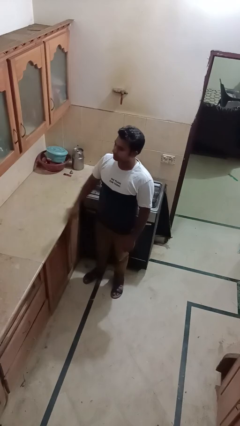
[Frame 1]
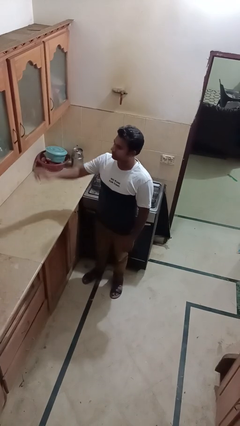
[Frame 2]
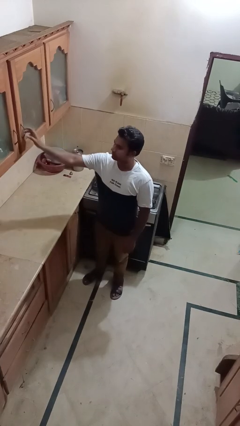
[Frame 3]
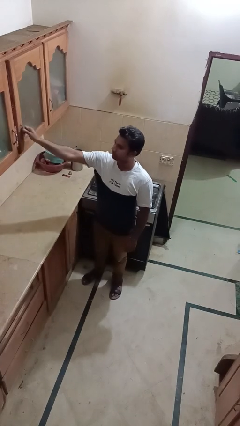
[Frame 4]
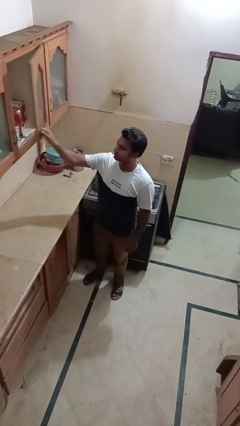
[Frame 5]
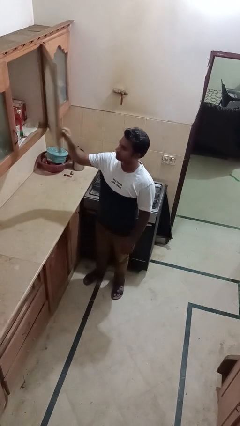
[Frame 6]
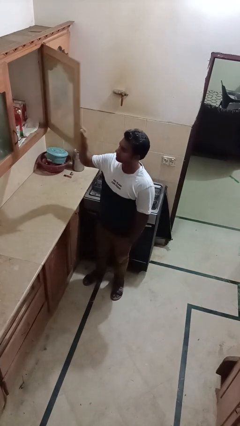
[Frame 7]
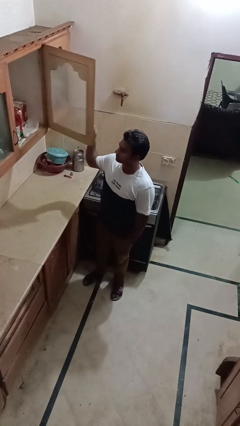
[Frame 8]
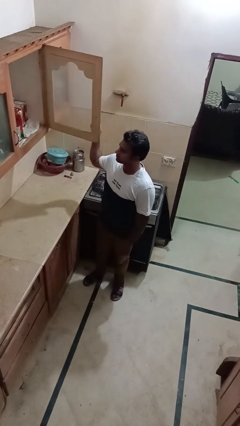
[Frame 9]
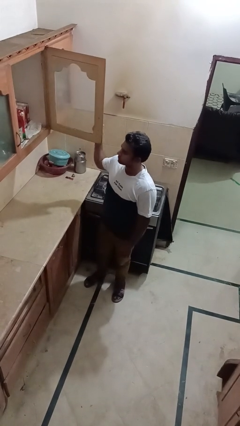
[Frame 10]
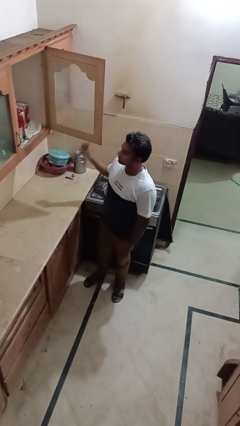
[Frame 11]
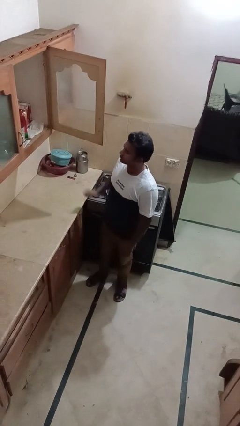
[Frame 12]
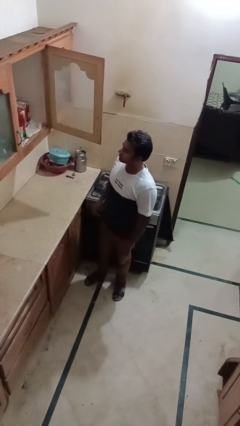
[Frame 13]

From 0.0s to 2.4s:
person opens cabinet

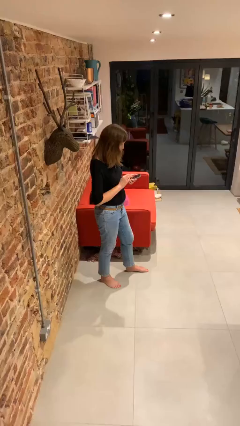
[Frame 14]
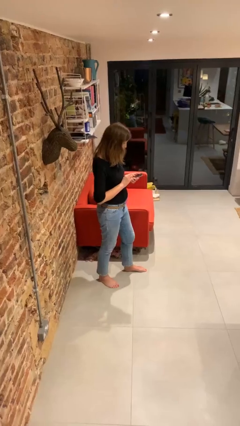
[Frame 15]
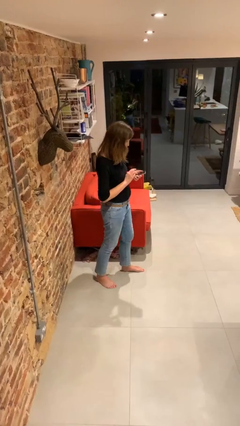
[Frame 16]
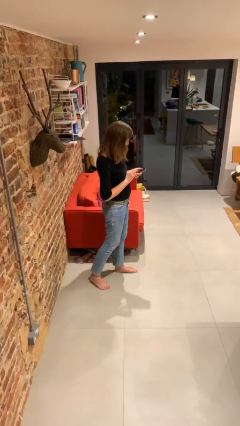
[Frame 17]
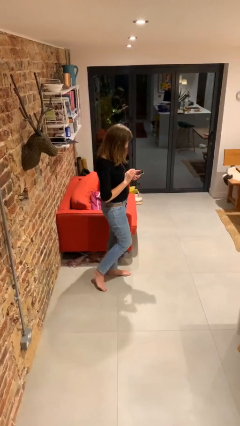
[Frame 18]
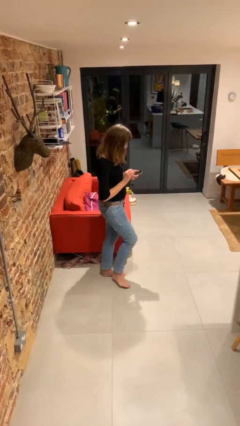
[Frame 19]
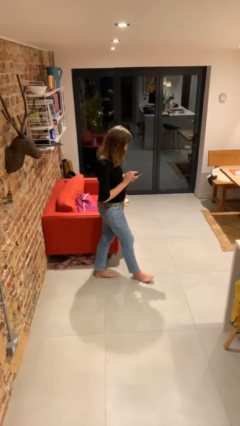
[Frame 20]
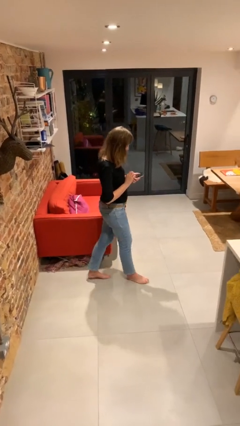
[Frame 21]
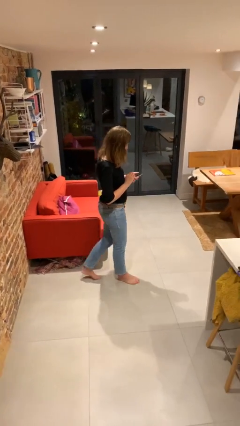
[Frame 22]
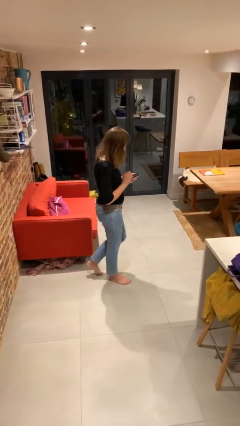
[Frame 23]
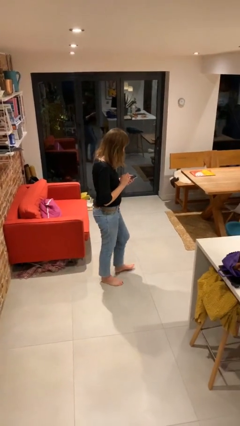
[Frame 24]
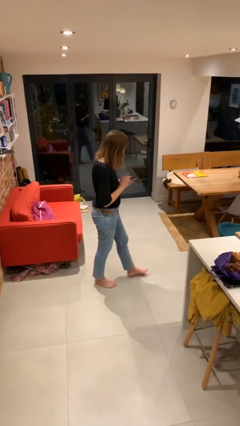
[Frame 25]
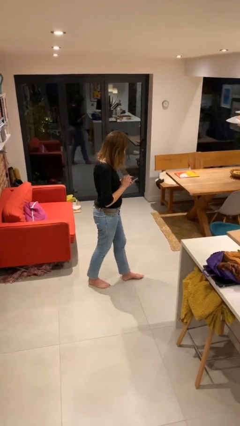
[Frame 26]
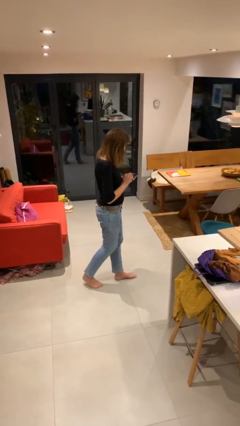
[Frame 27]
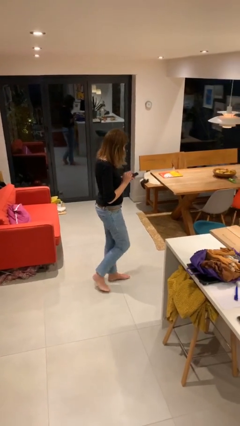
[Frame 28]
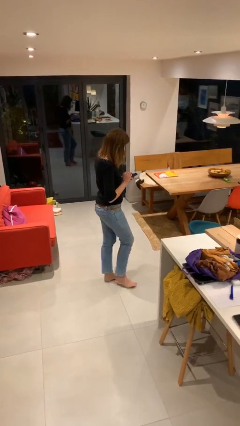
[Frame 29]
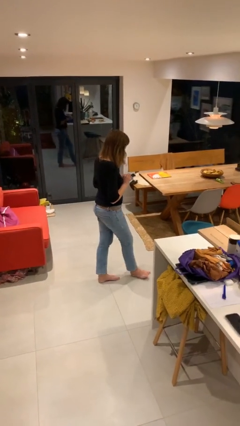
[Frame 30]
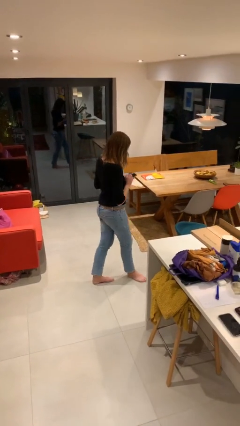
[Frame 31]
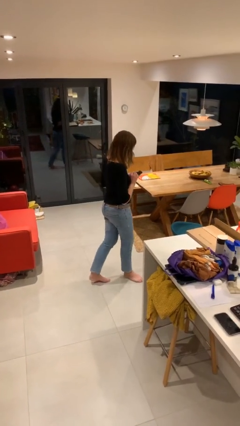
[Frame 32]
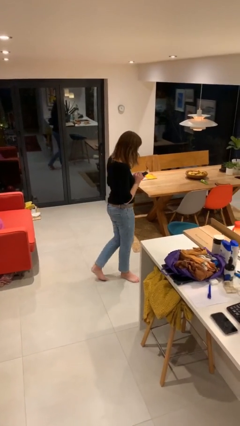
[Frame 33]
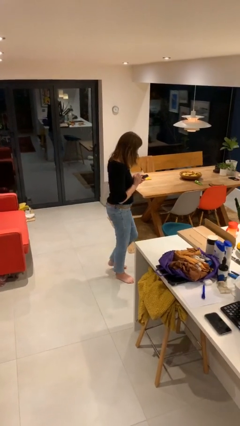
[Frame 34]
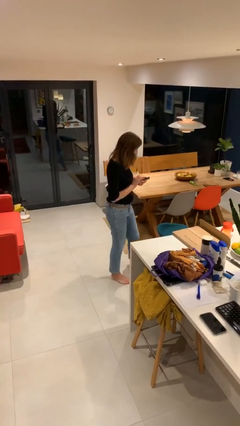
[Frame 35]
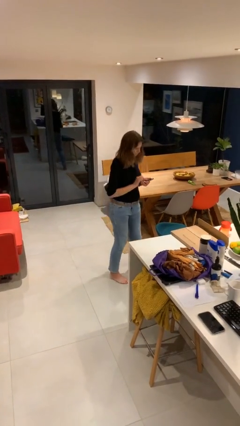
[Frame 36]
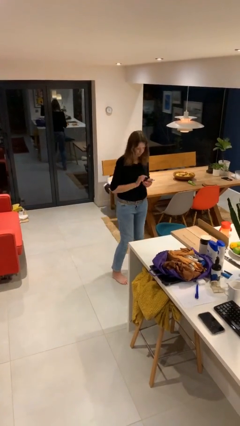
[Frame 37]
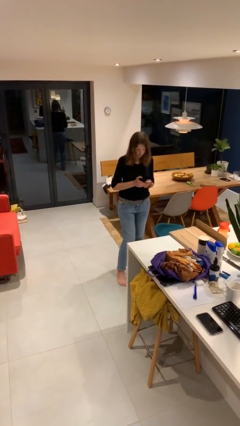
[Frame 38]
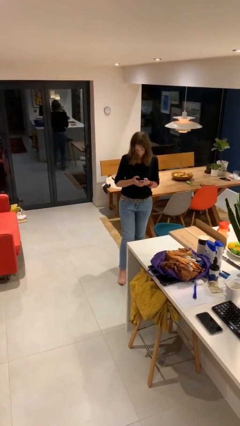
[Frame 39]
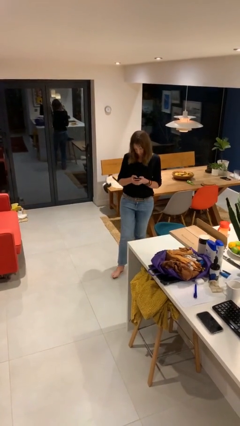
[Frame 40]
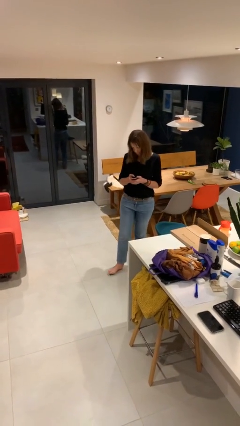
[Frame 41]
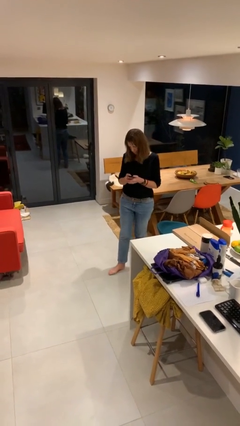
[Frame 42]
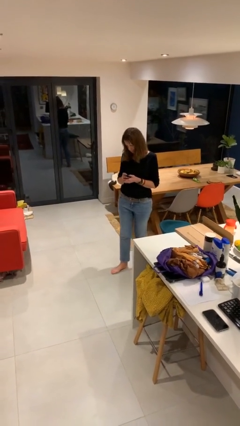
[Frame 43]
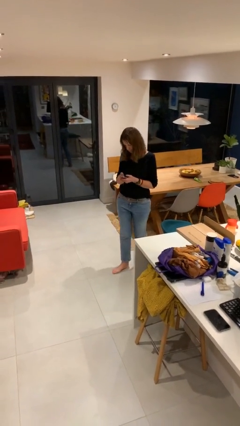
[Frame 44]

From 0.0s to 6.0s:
person texts on phone

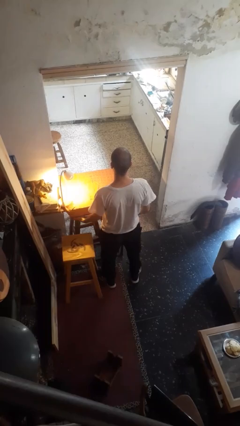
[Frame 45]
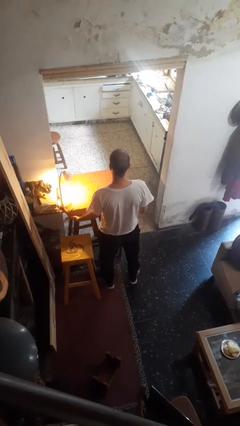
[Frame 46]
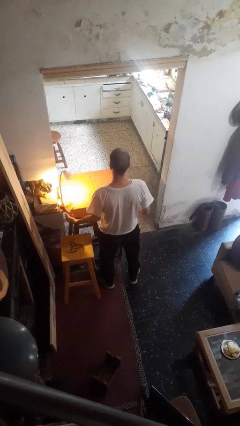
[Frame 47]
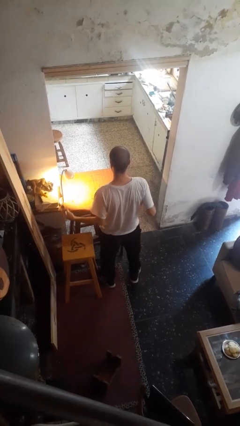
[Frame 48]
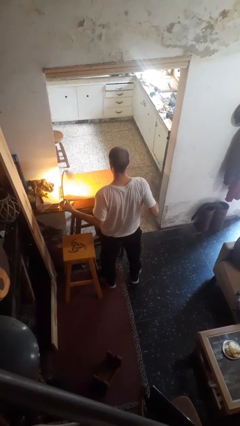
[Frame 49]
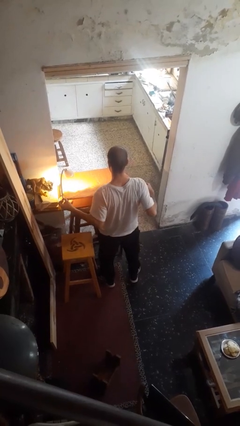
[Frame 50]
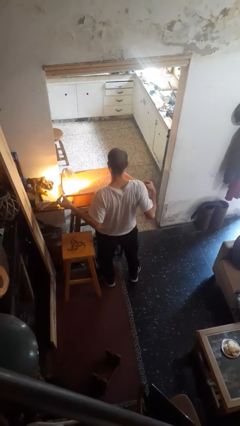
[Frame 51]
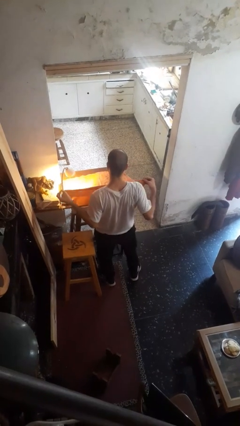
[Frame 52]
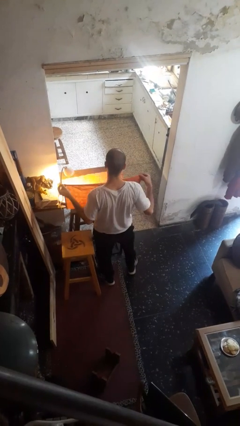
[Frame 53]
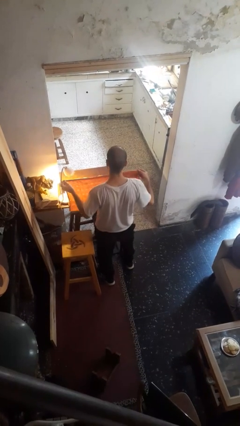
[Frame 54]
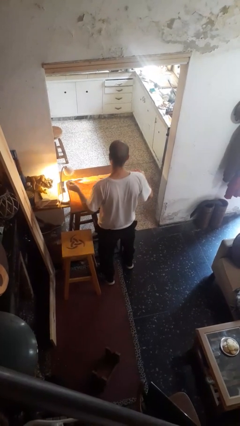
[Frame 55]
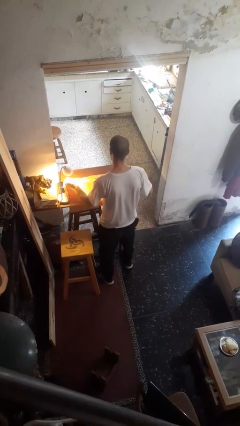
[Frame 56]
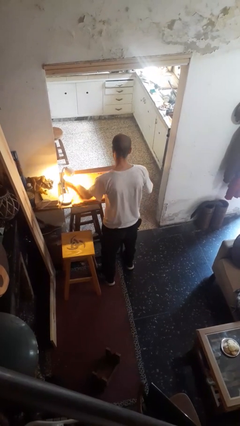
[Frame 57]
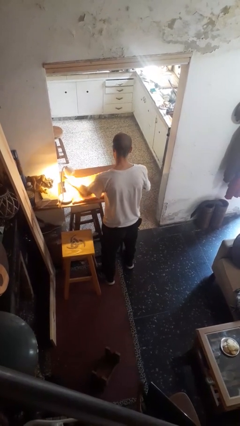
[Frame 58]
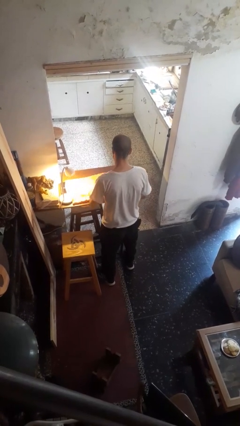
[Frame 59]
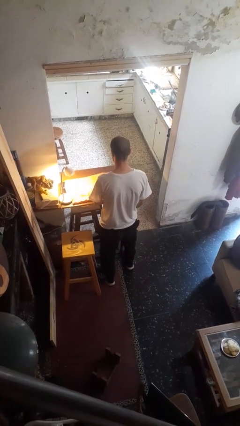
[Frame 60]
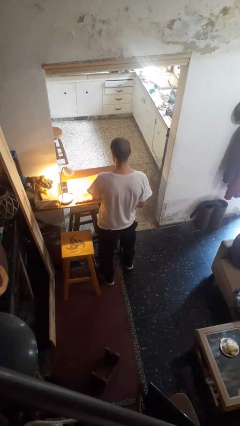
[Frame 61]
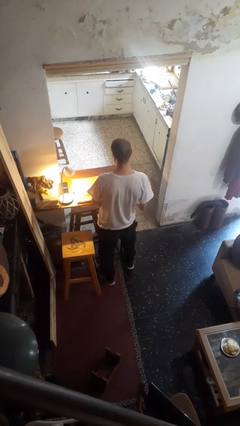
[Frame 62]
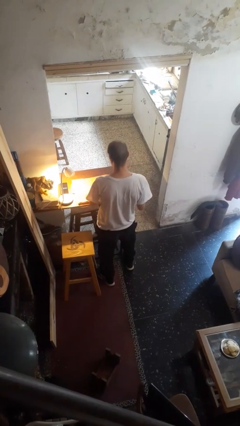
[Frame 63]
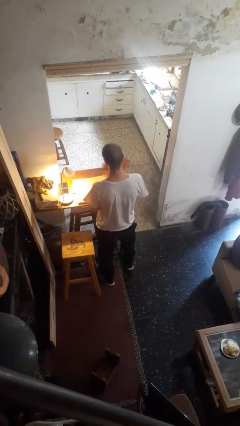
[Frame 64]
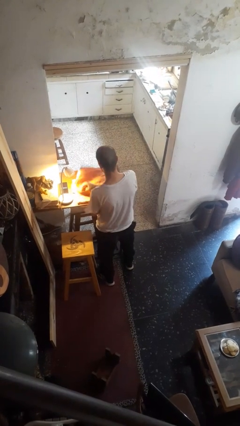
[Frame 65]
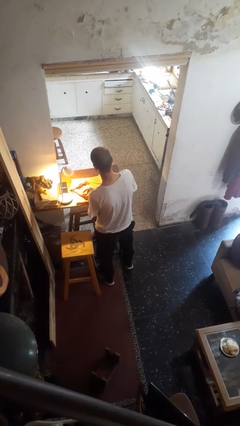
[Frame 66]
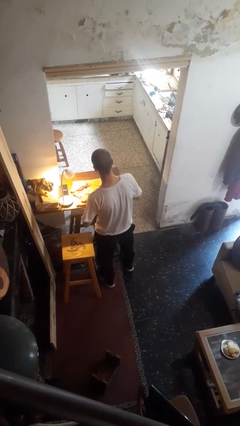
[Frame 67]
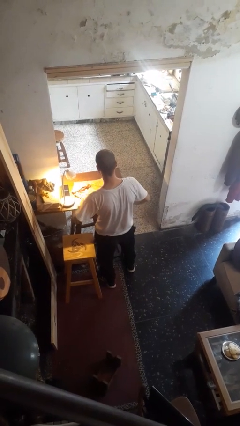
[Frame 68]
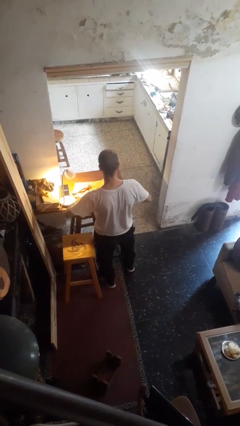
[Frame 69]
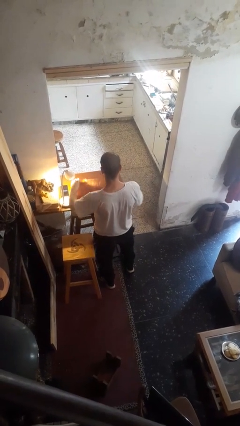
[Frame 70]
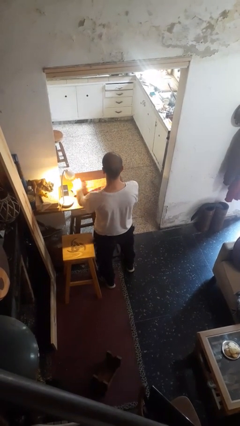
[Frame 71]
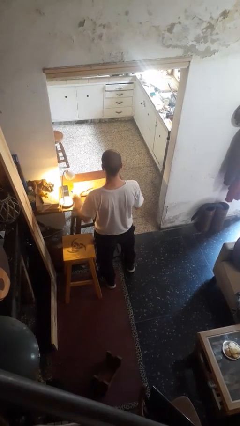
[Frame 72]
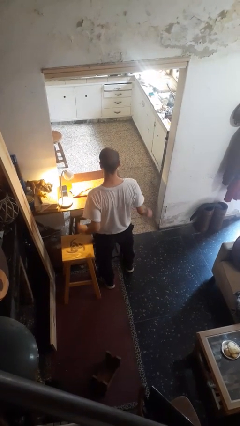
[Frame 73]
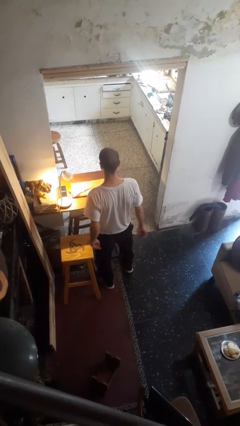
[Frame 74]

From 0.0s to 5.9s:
person folds tablecloth

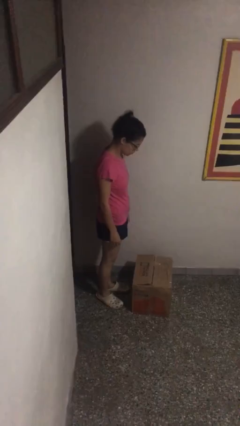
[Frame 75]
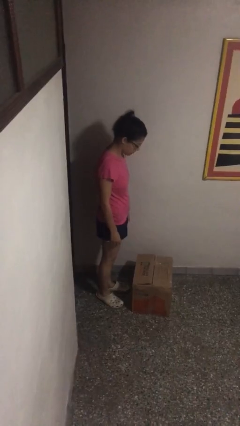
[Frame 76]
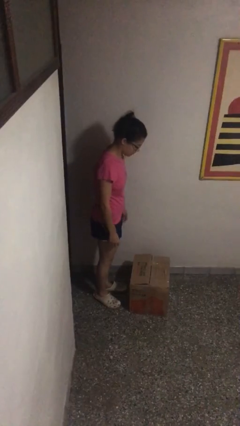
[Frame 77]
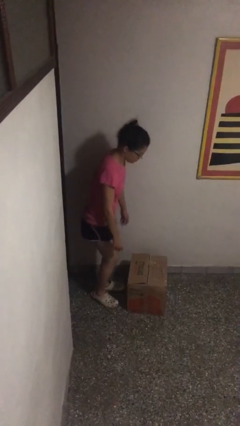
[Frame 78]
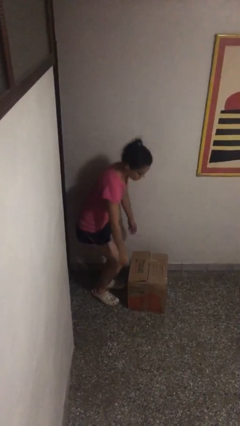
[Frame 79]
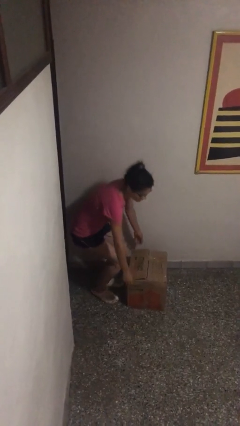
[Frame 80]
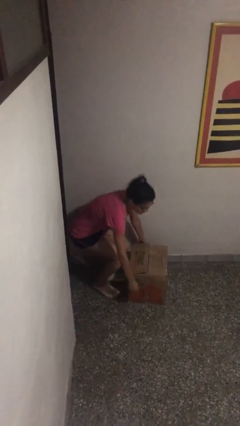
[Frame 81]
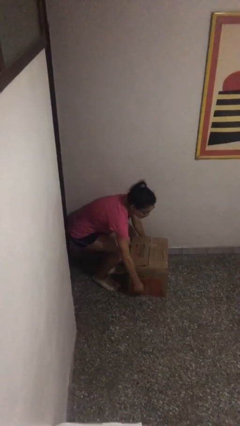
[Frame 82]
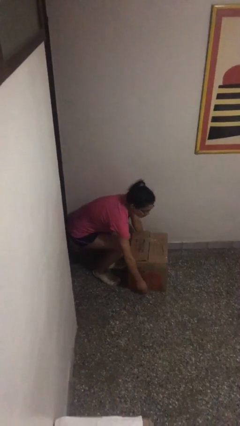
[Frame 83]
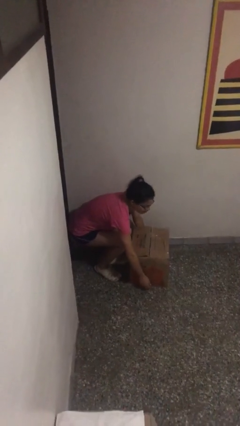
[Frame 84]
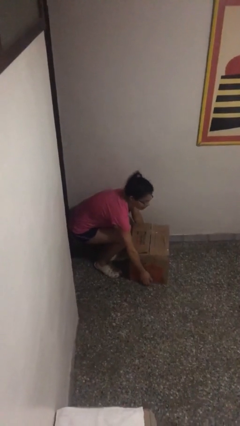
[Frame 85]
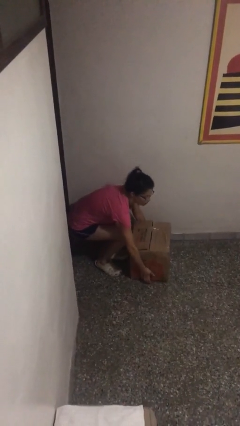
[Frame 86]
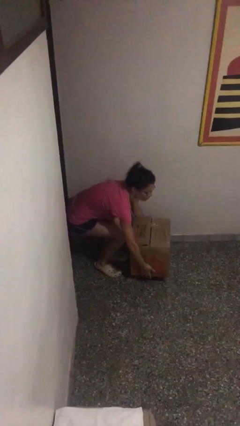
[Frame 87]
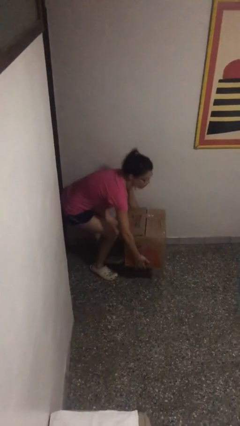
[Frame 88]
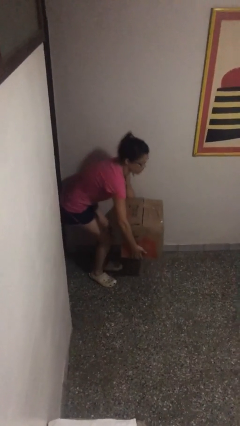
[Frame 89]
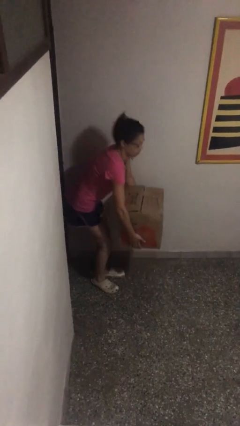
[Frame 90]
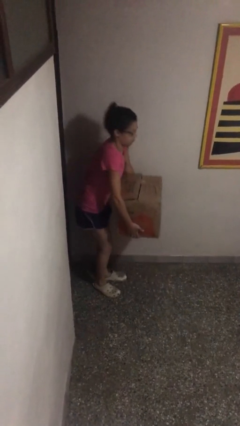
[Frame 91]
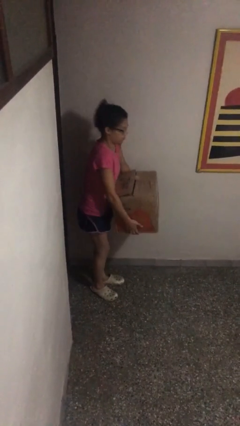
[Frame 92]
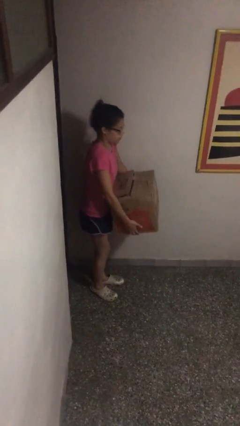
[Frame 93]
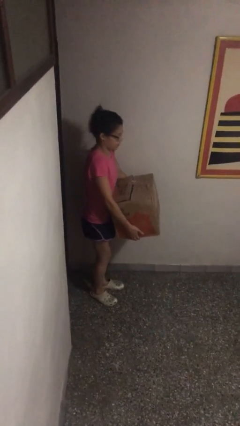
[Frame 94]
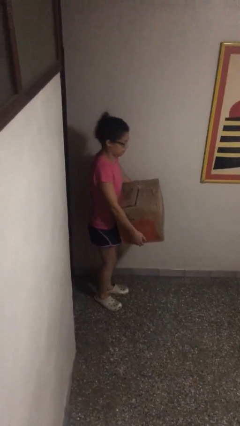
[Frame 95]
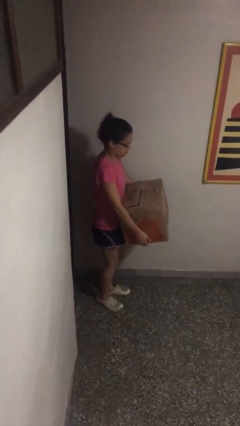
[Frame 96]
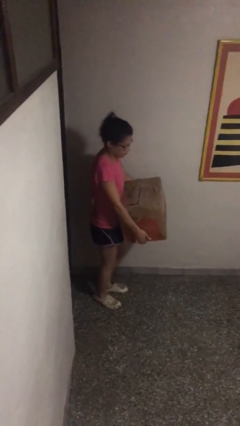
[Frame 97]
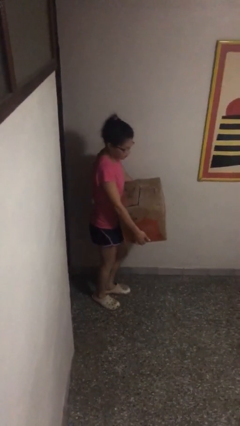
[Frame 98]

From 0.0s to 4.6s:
person picks up object from floor
